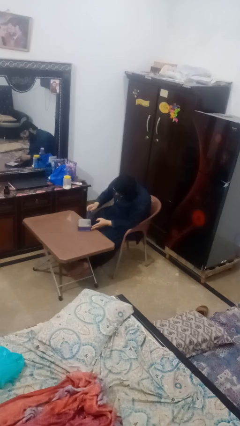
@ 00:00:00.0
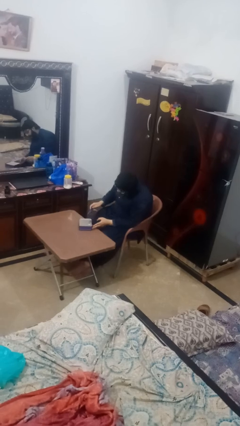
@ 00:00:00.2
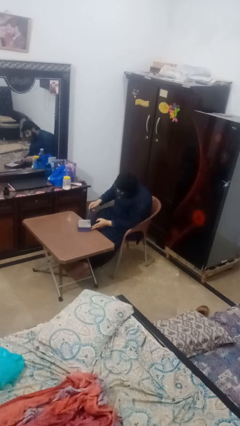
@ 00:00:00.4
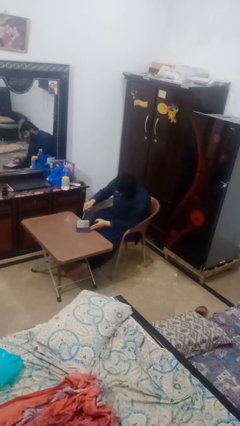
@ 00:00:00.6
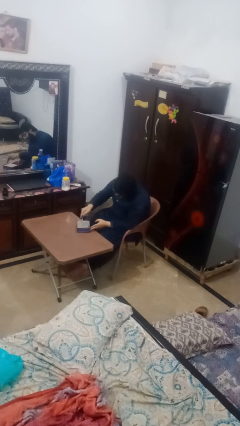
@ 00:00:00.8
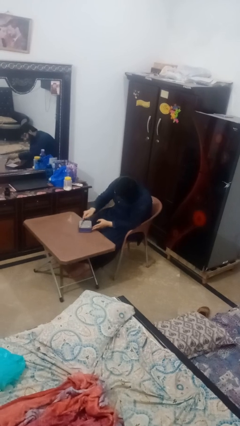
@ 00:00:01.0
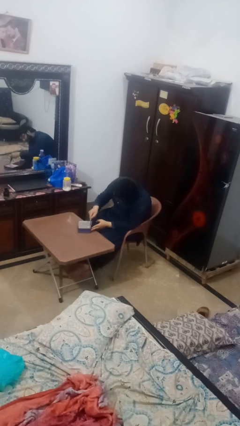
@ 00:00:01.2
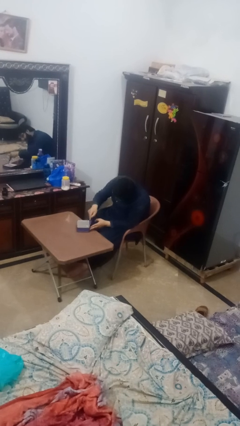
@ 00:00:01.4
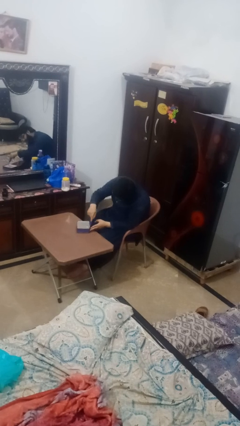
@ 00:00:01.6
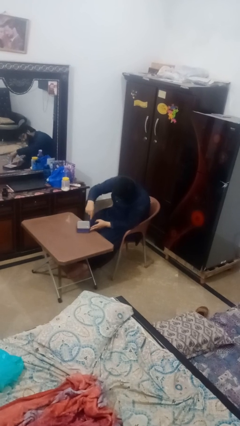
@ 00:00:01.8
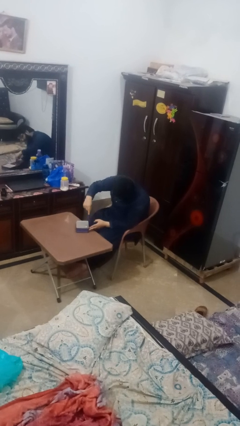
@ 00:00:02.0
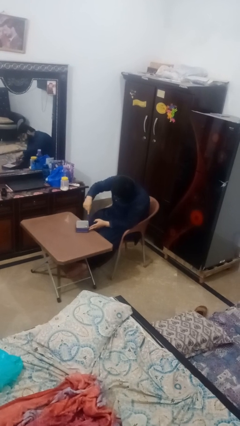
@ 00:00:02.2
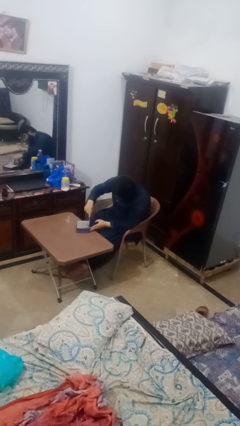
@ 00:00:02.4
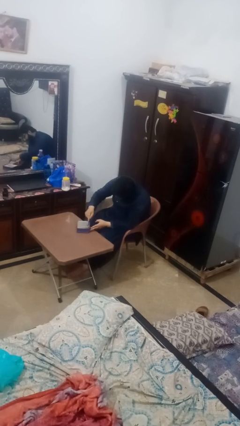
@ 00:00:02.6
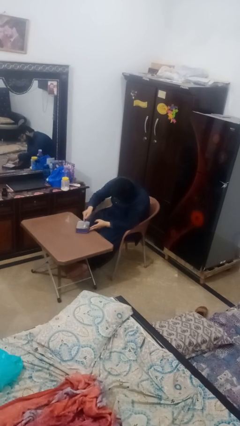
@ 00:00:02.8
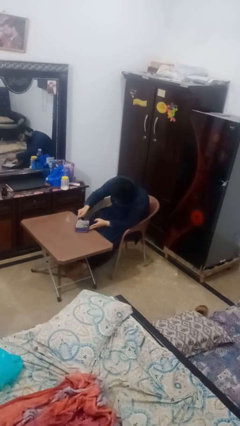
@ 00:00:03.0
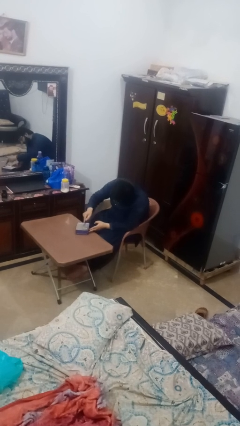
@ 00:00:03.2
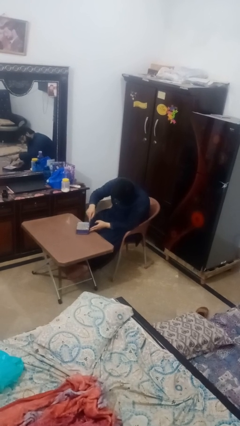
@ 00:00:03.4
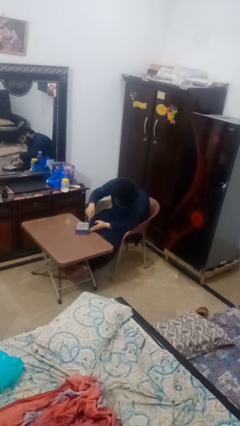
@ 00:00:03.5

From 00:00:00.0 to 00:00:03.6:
person opens can with can opener

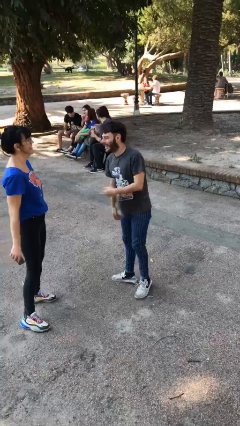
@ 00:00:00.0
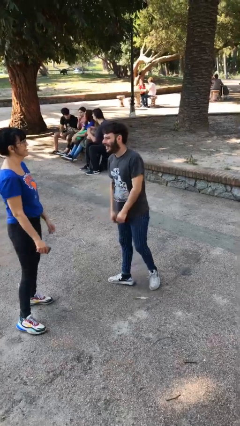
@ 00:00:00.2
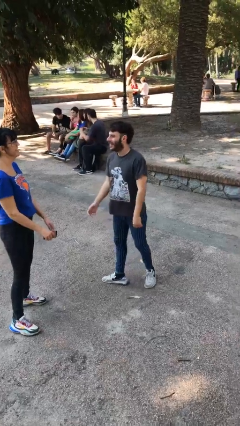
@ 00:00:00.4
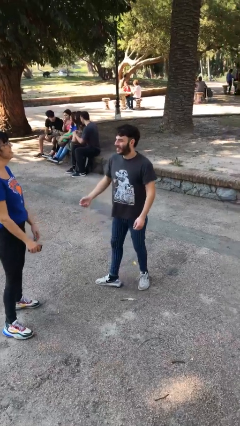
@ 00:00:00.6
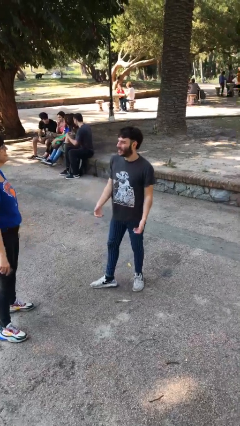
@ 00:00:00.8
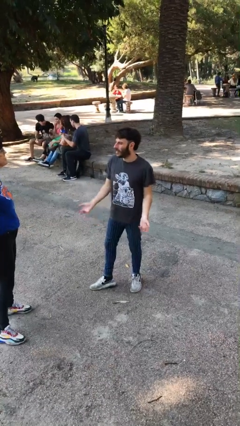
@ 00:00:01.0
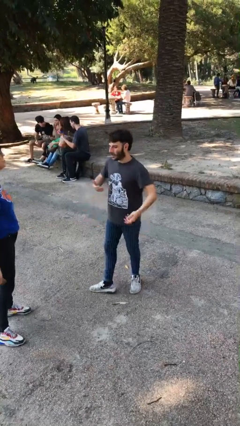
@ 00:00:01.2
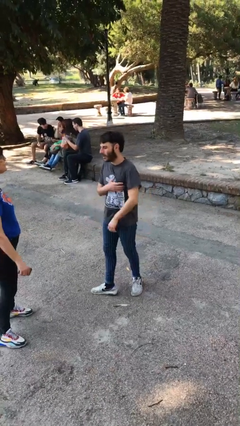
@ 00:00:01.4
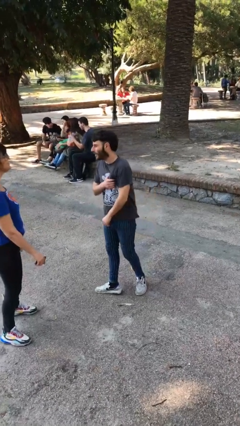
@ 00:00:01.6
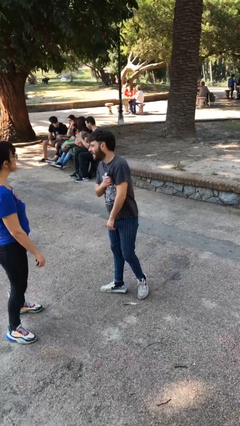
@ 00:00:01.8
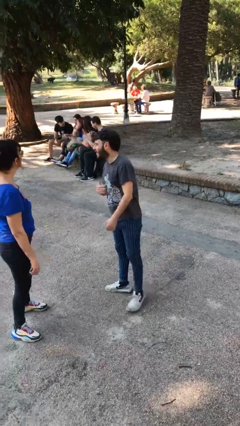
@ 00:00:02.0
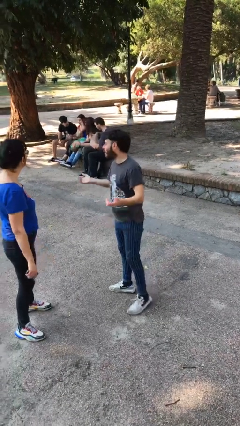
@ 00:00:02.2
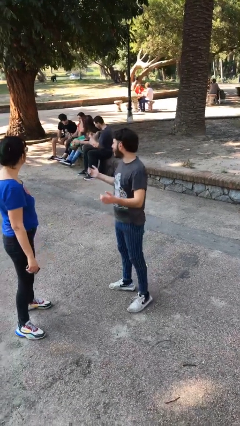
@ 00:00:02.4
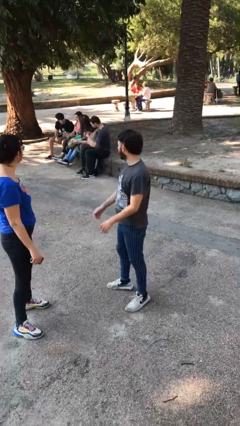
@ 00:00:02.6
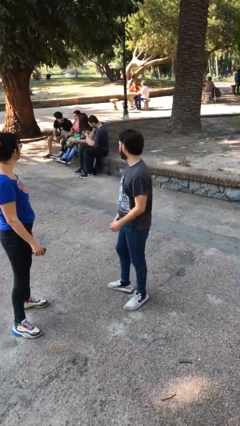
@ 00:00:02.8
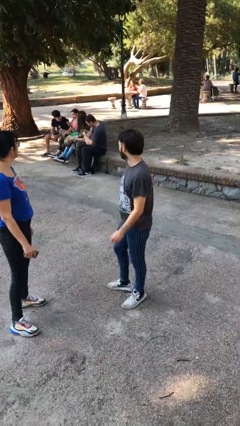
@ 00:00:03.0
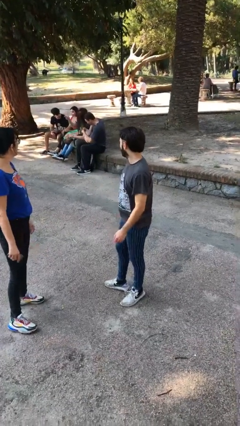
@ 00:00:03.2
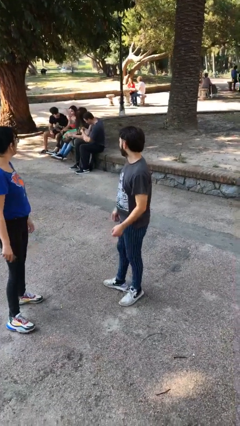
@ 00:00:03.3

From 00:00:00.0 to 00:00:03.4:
person talks to person

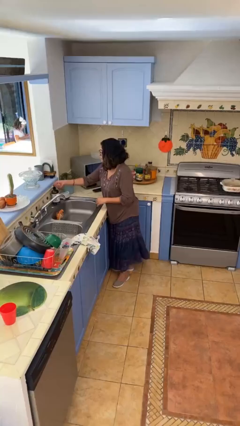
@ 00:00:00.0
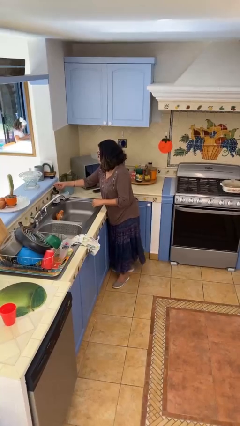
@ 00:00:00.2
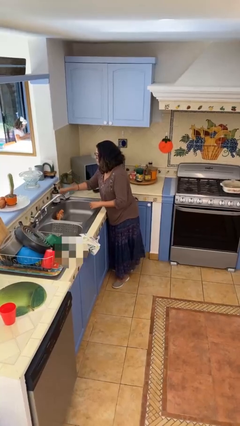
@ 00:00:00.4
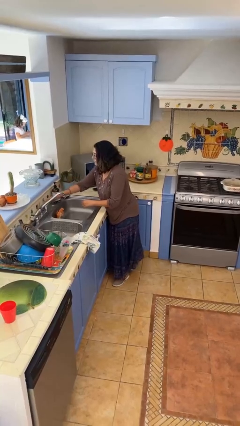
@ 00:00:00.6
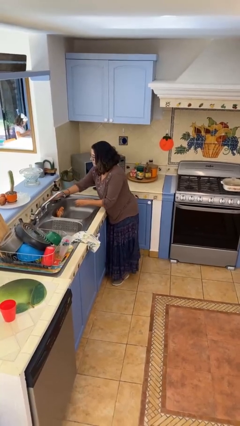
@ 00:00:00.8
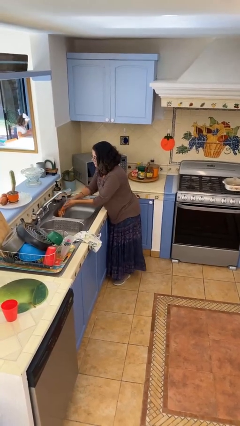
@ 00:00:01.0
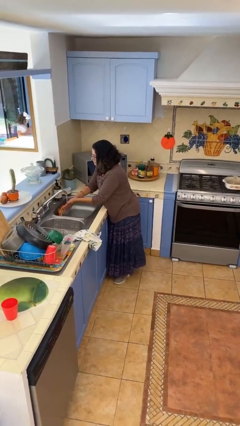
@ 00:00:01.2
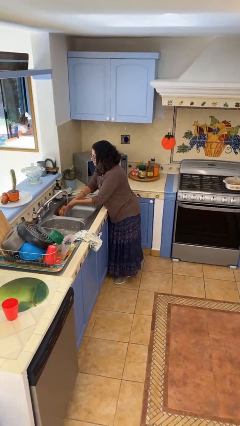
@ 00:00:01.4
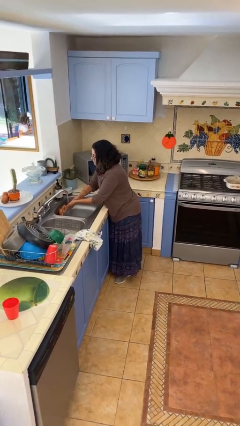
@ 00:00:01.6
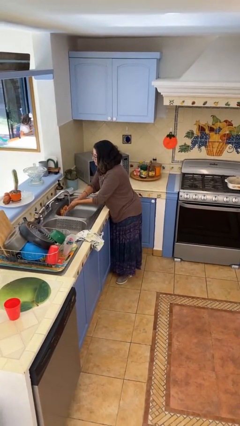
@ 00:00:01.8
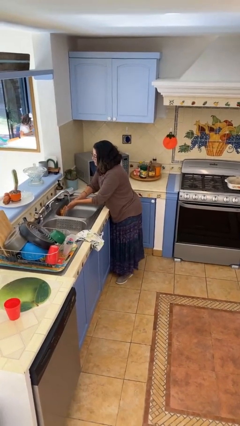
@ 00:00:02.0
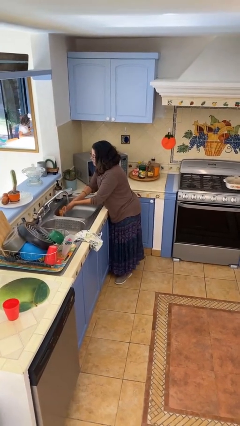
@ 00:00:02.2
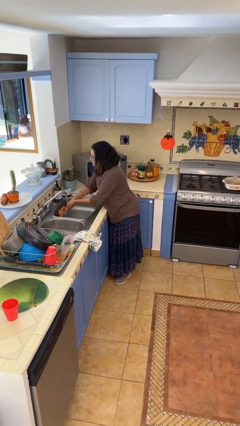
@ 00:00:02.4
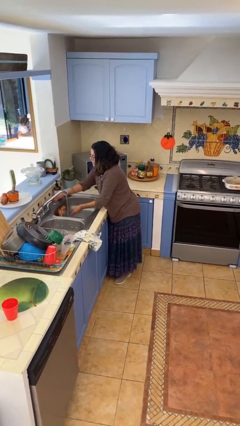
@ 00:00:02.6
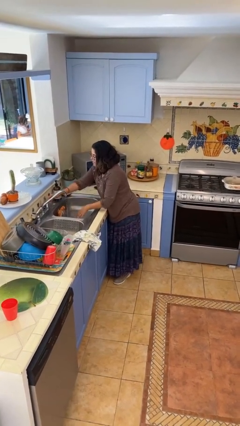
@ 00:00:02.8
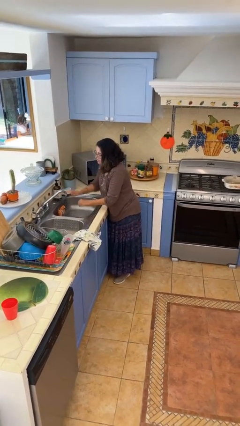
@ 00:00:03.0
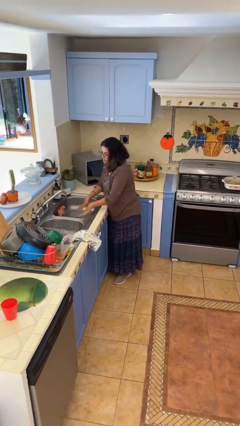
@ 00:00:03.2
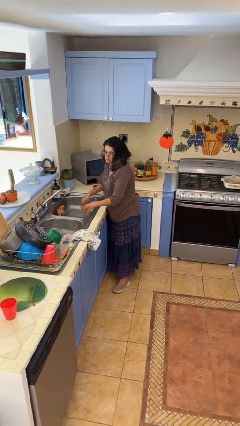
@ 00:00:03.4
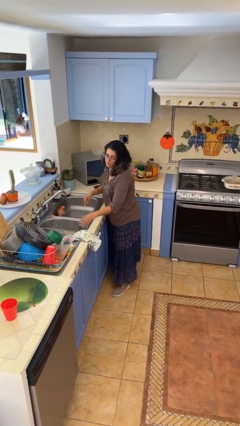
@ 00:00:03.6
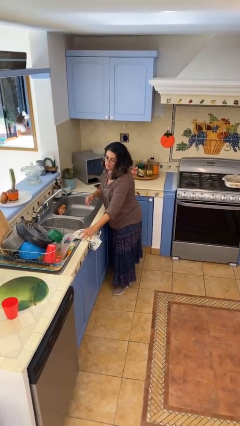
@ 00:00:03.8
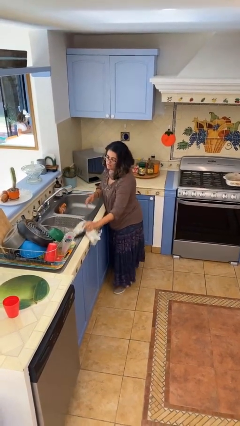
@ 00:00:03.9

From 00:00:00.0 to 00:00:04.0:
person washes hands

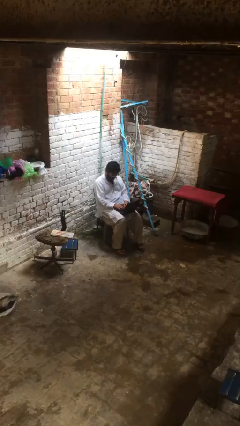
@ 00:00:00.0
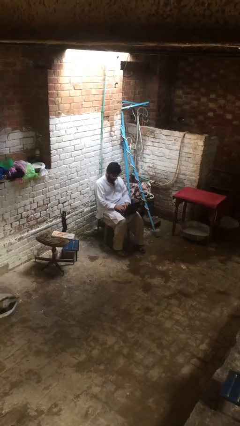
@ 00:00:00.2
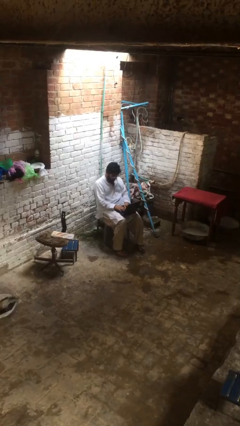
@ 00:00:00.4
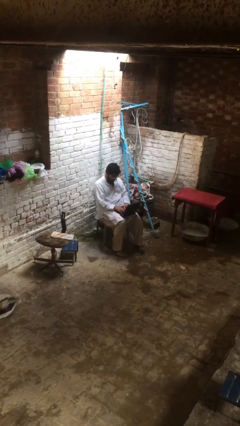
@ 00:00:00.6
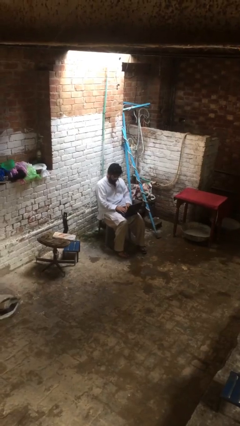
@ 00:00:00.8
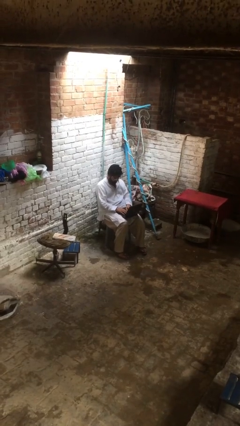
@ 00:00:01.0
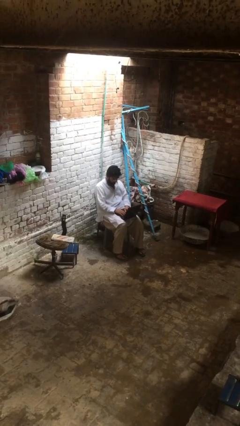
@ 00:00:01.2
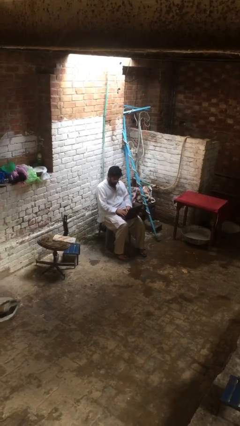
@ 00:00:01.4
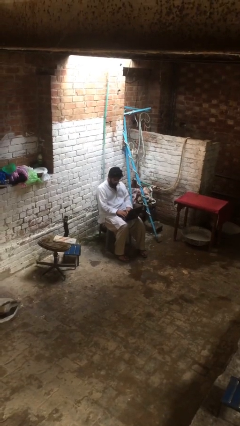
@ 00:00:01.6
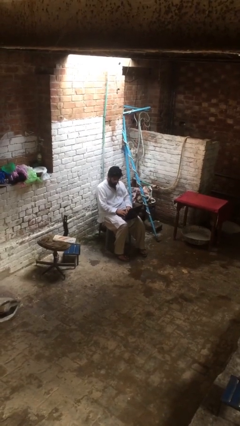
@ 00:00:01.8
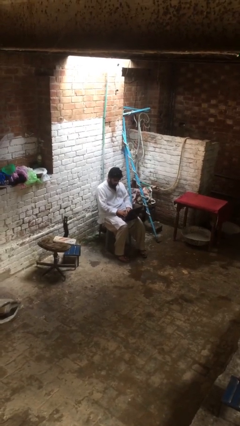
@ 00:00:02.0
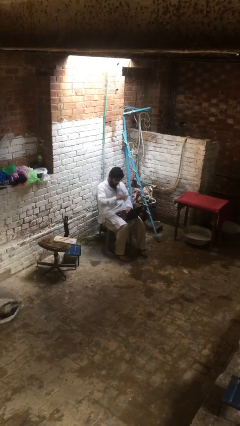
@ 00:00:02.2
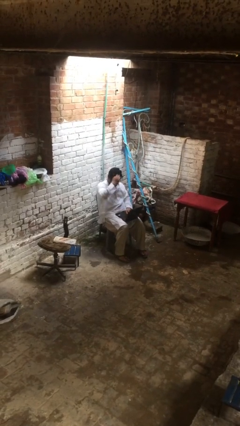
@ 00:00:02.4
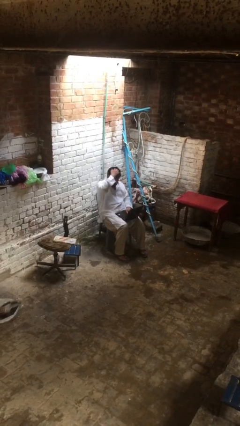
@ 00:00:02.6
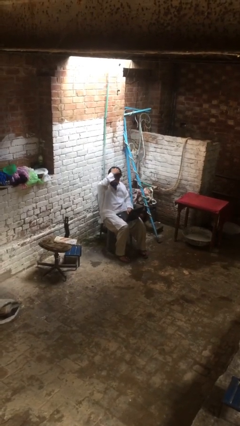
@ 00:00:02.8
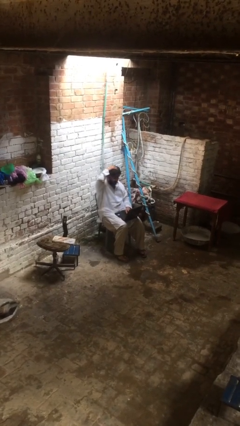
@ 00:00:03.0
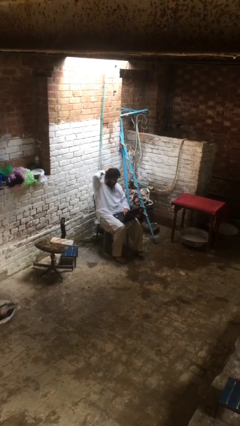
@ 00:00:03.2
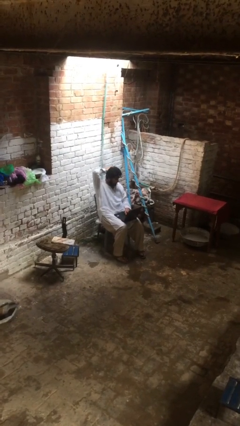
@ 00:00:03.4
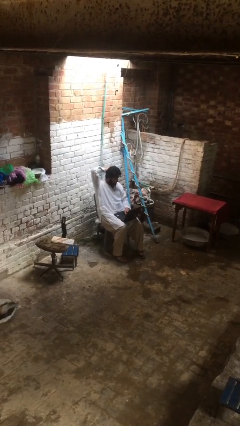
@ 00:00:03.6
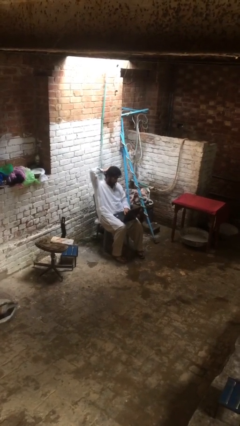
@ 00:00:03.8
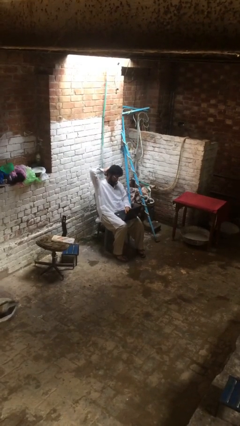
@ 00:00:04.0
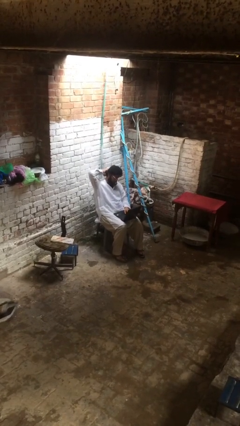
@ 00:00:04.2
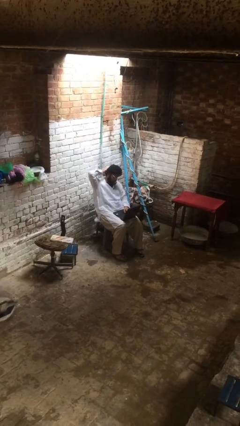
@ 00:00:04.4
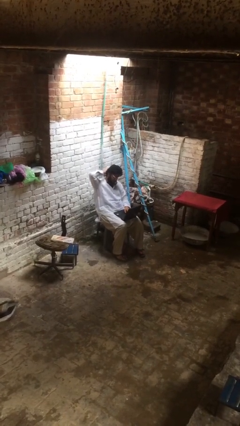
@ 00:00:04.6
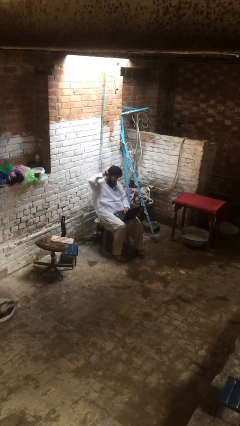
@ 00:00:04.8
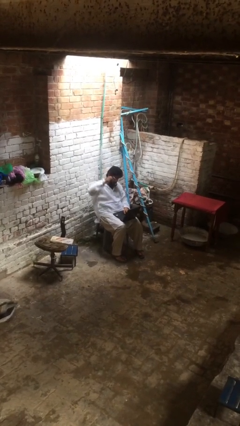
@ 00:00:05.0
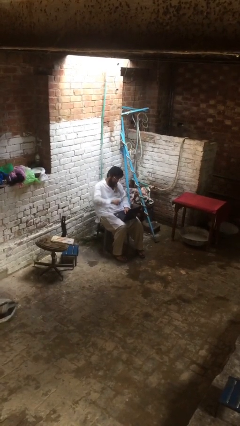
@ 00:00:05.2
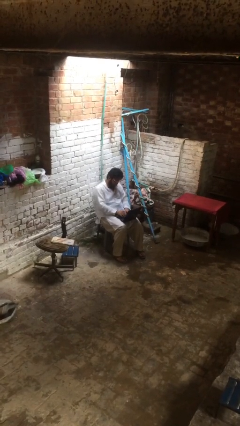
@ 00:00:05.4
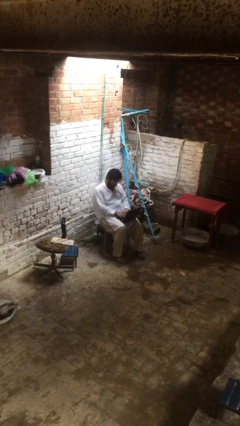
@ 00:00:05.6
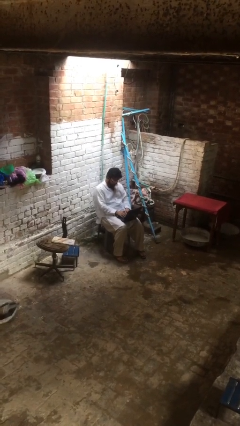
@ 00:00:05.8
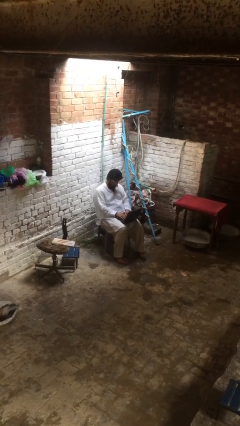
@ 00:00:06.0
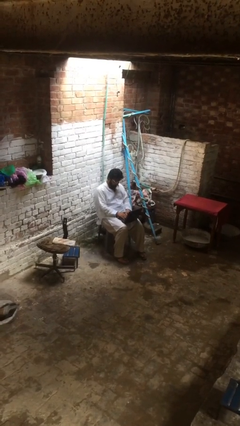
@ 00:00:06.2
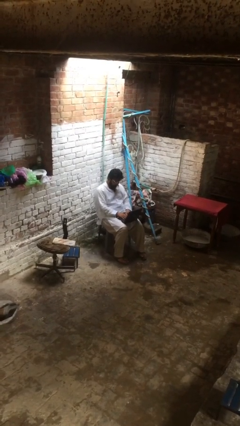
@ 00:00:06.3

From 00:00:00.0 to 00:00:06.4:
person interacts with laptop

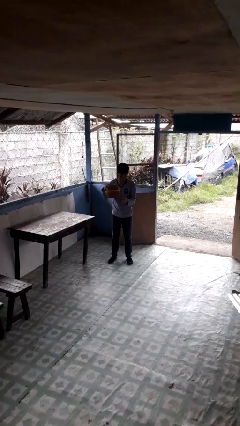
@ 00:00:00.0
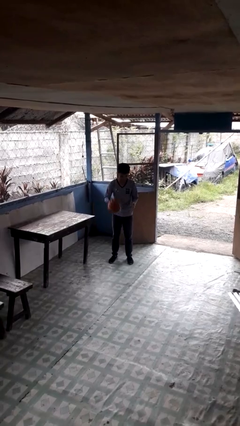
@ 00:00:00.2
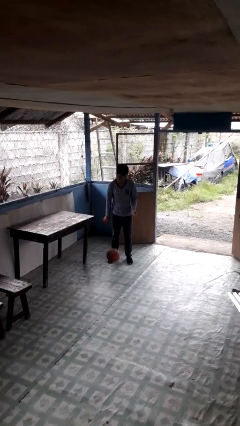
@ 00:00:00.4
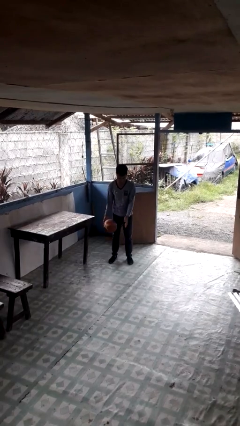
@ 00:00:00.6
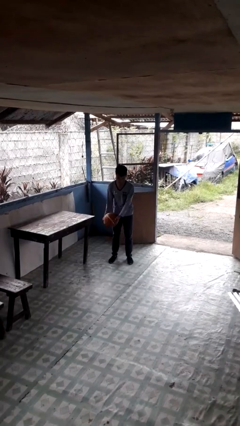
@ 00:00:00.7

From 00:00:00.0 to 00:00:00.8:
person bounces ball on floor
